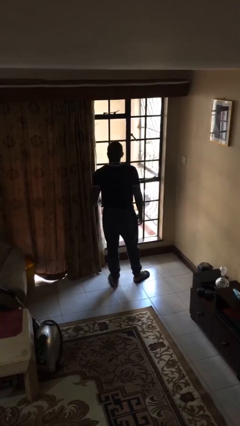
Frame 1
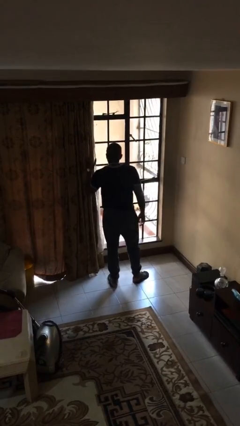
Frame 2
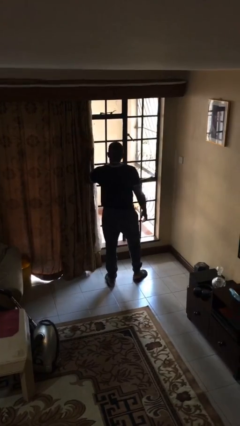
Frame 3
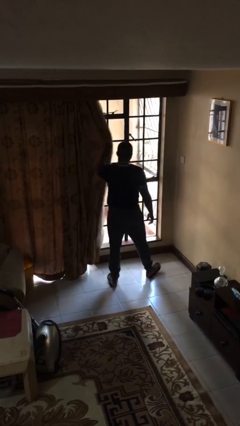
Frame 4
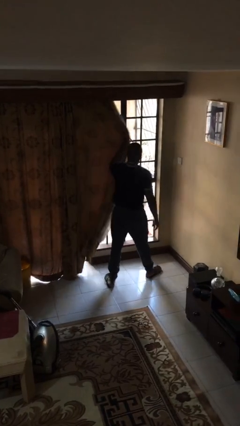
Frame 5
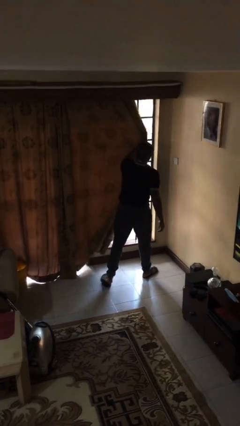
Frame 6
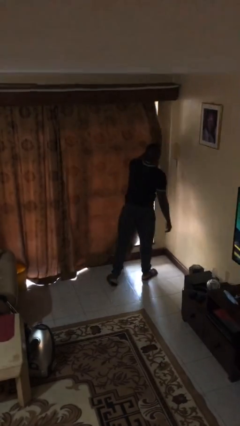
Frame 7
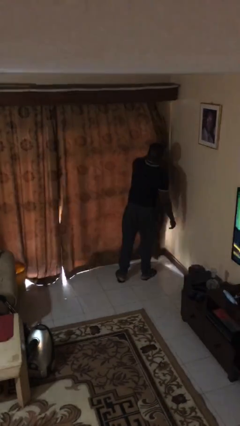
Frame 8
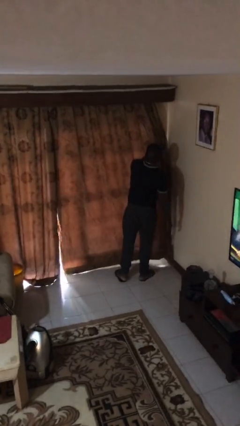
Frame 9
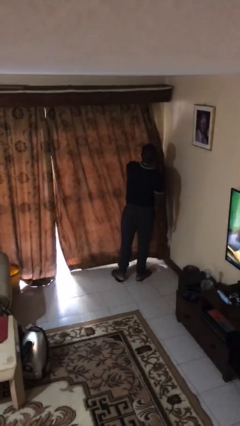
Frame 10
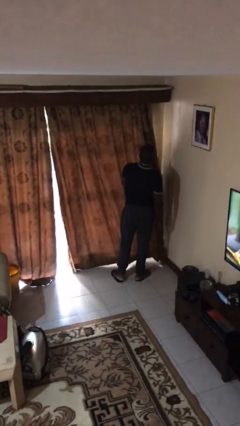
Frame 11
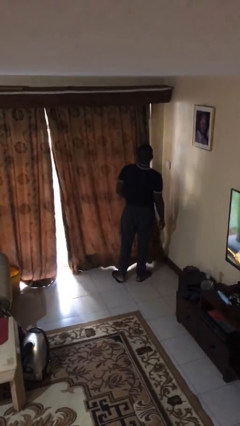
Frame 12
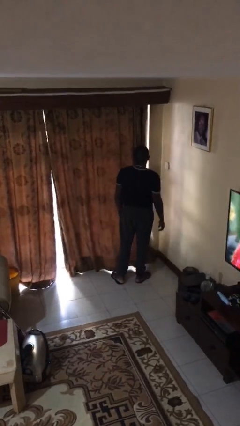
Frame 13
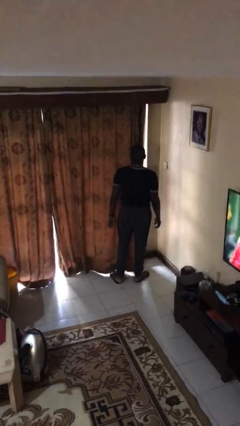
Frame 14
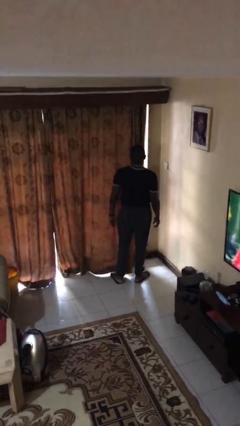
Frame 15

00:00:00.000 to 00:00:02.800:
person closes curtains

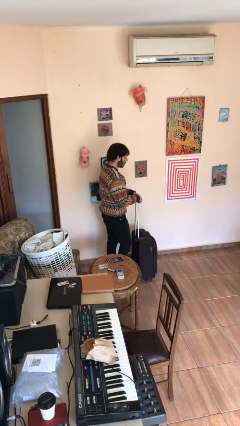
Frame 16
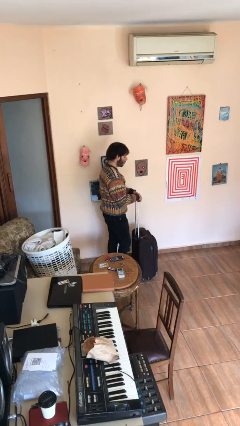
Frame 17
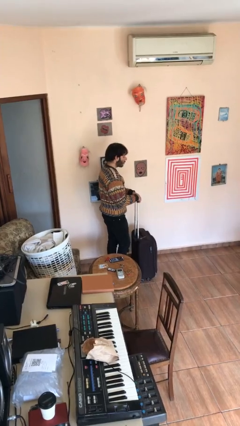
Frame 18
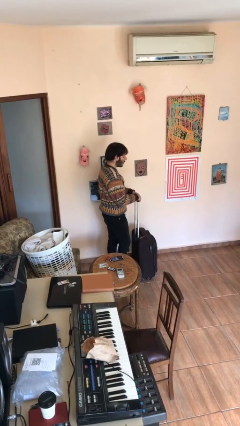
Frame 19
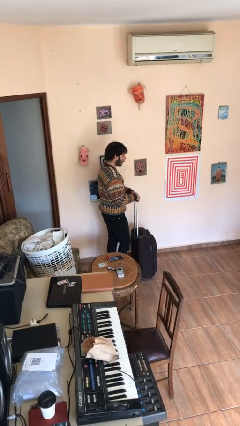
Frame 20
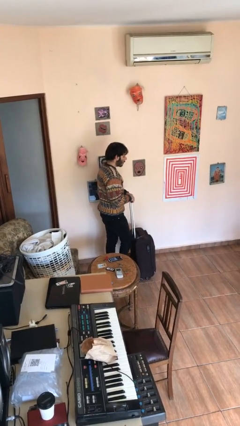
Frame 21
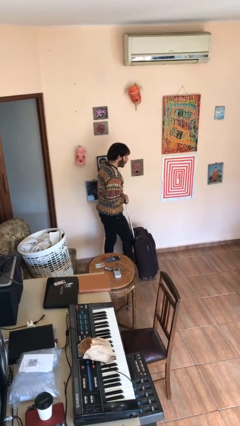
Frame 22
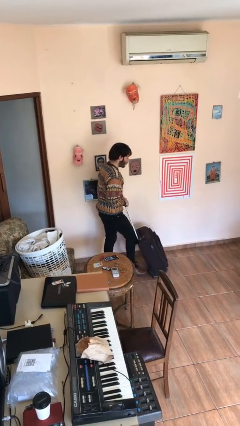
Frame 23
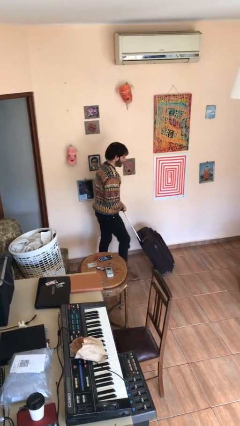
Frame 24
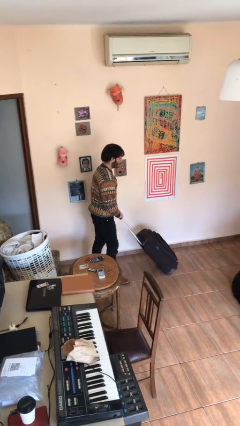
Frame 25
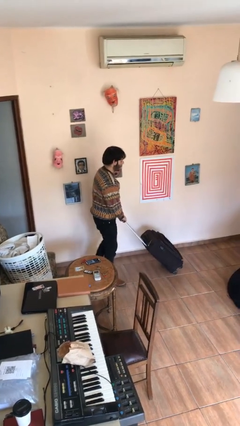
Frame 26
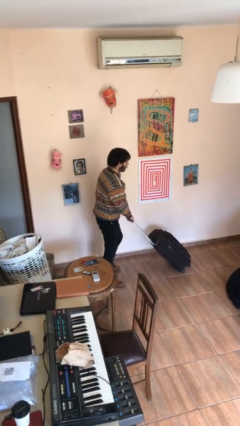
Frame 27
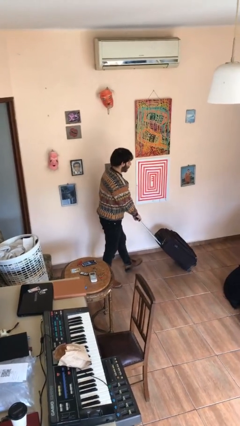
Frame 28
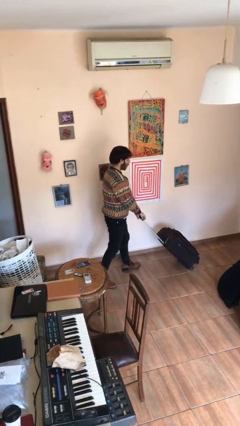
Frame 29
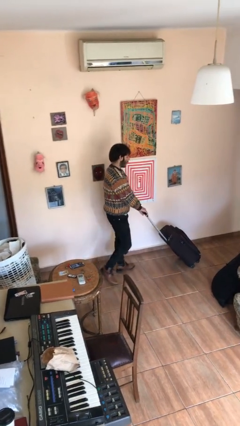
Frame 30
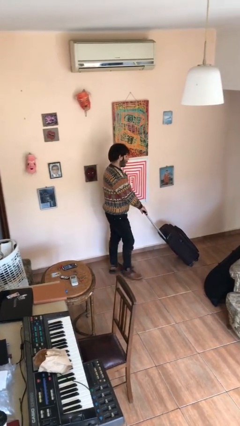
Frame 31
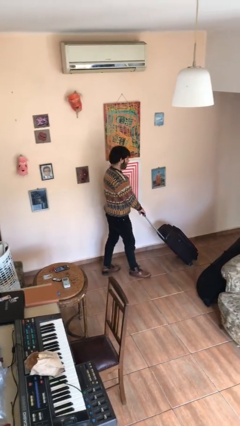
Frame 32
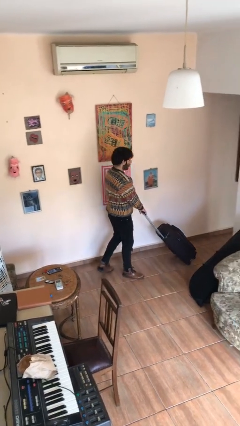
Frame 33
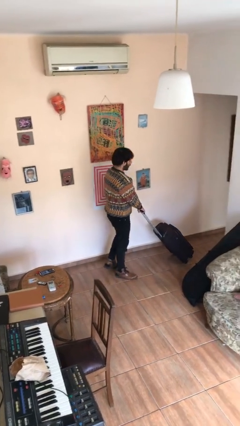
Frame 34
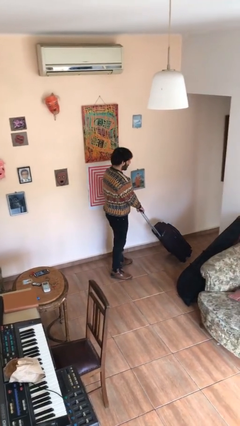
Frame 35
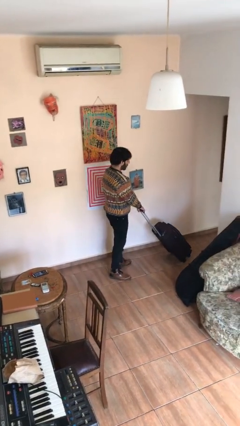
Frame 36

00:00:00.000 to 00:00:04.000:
person pushes wheeled cart

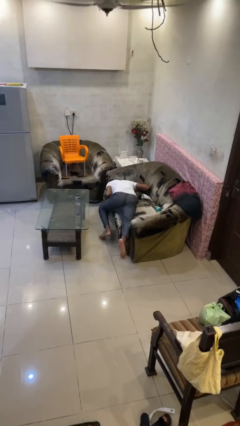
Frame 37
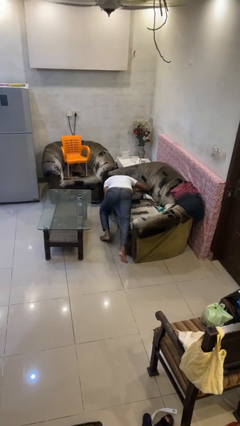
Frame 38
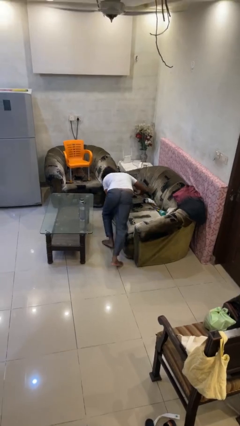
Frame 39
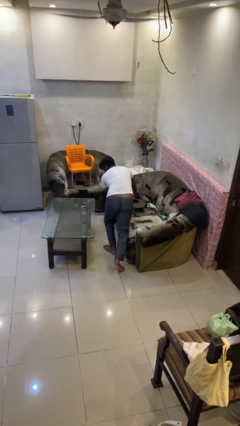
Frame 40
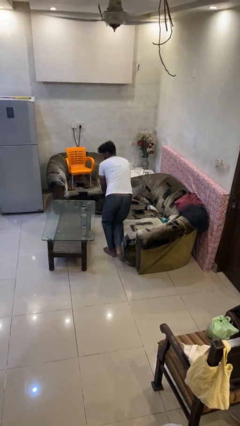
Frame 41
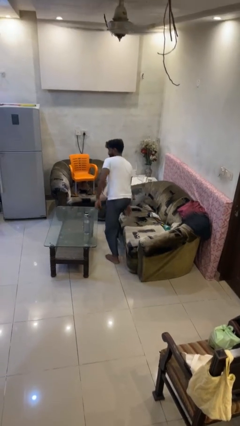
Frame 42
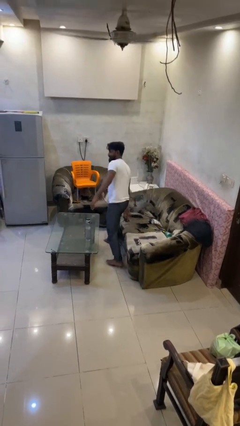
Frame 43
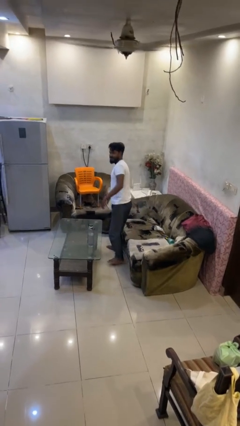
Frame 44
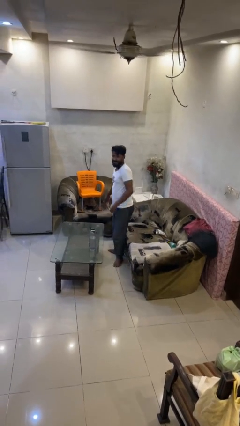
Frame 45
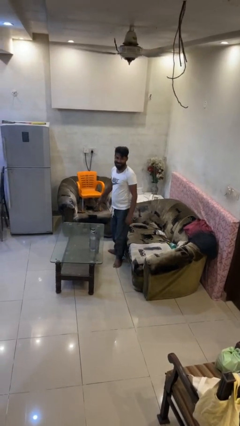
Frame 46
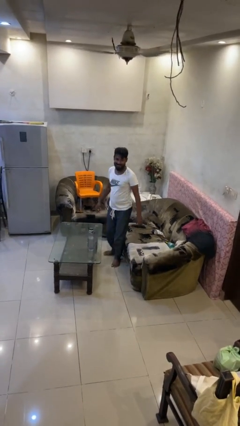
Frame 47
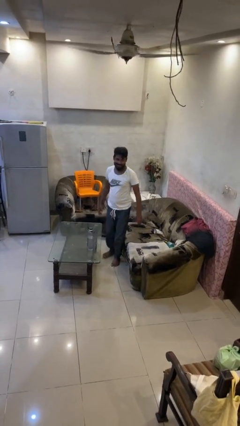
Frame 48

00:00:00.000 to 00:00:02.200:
person stands up

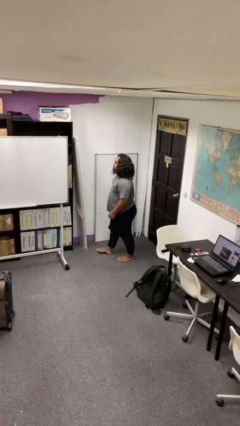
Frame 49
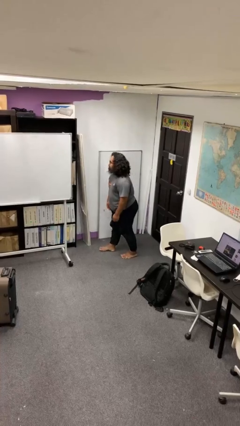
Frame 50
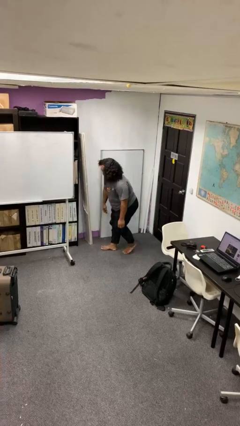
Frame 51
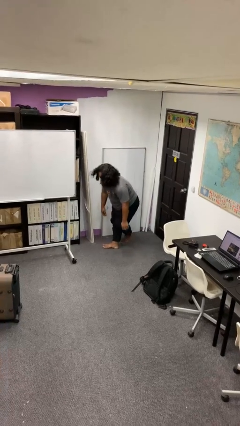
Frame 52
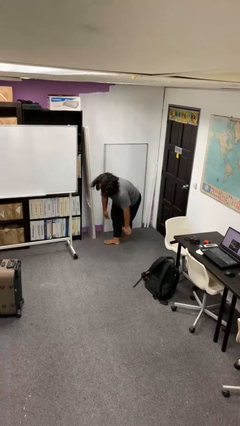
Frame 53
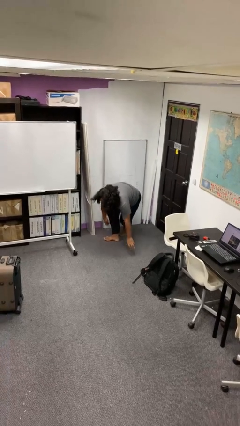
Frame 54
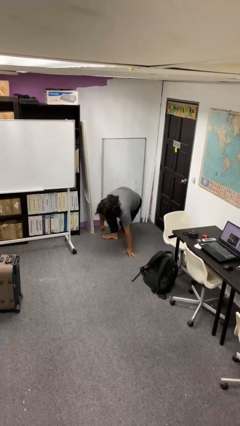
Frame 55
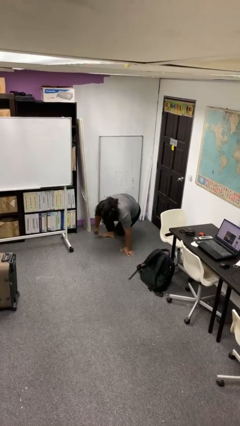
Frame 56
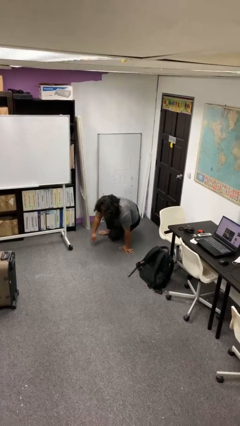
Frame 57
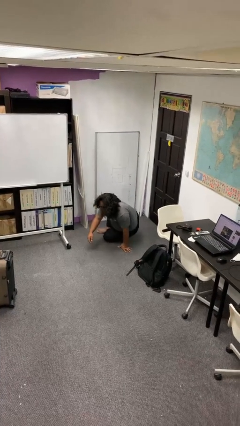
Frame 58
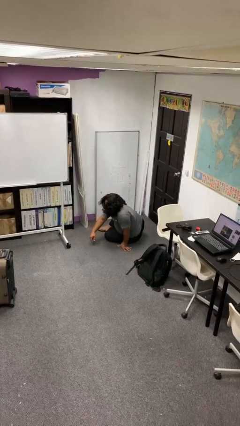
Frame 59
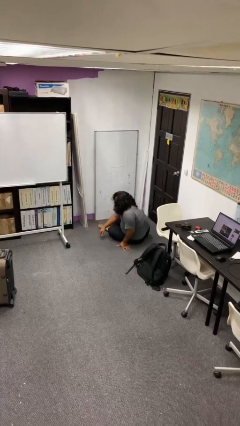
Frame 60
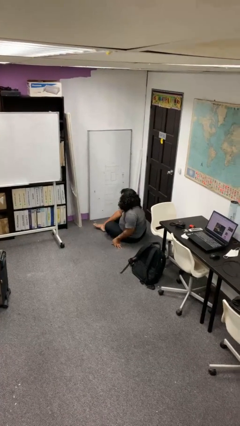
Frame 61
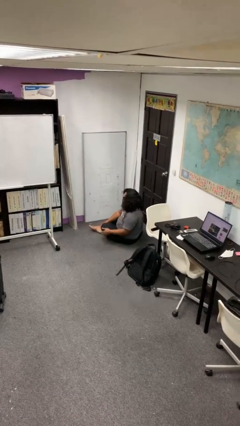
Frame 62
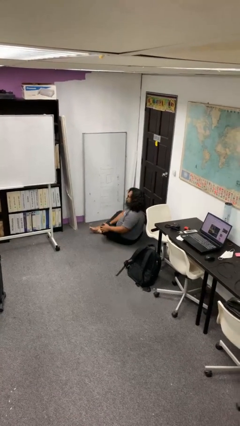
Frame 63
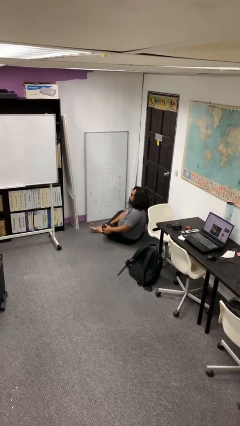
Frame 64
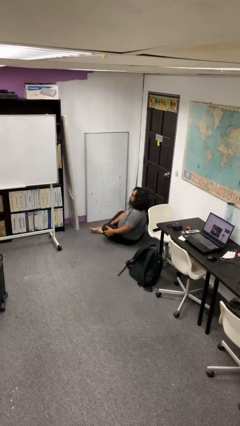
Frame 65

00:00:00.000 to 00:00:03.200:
person sits crisscross

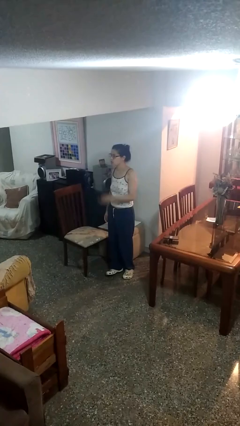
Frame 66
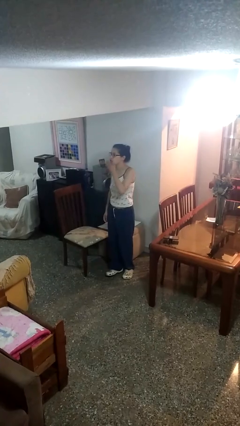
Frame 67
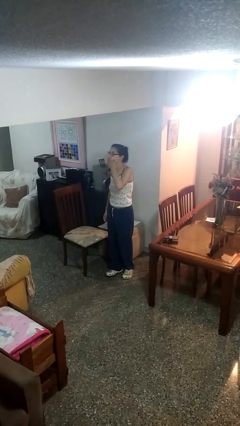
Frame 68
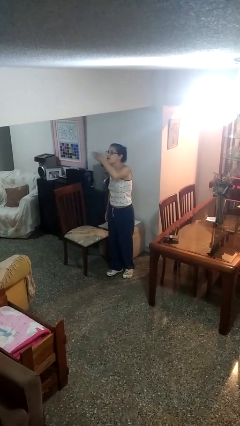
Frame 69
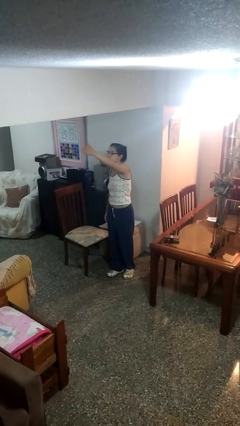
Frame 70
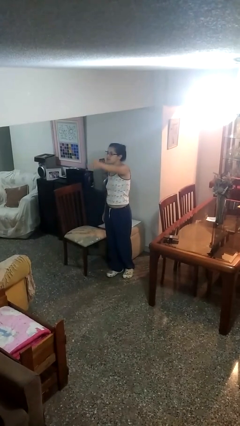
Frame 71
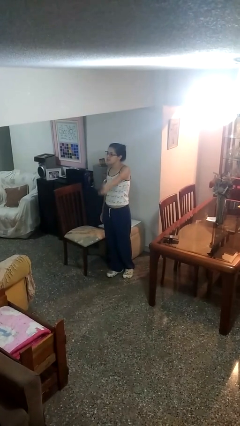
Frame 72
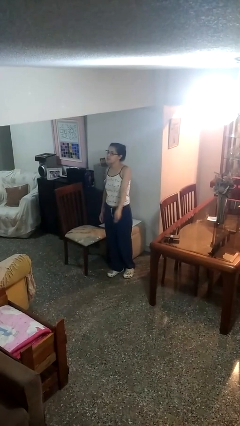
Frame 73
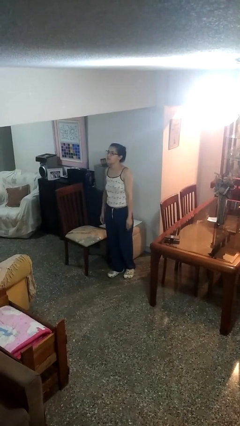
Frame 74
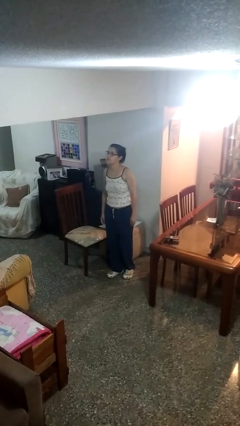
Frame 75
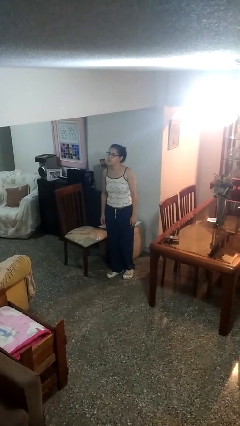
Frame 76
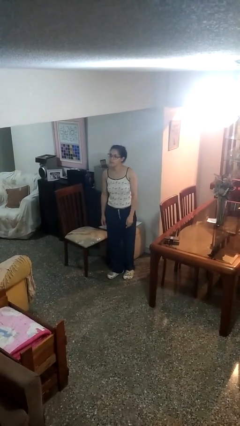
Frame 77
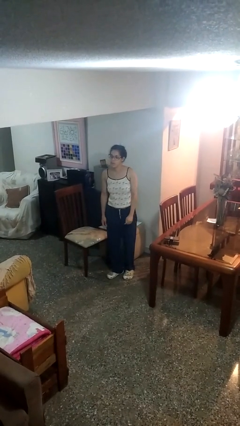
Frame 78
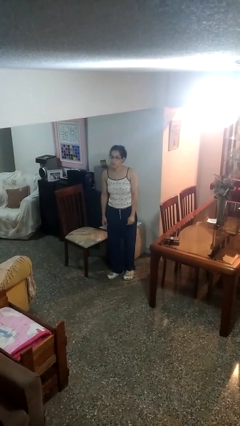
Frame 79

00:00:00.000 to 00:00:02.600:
person gestures blow kiss

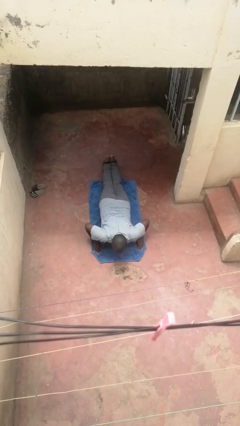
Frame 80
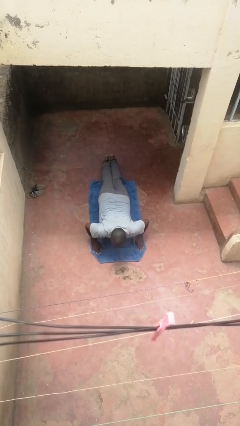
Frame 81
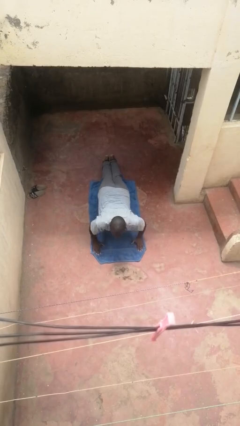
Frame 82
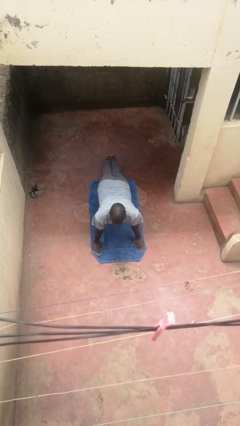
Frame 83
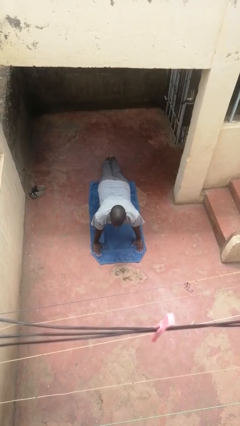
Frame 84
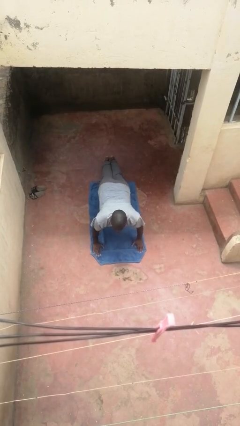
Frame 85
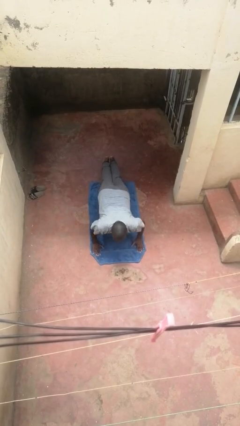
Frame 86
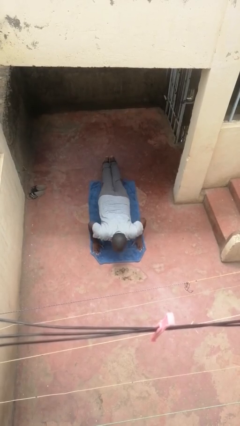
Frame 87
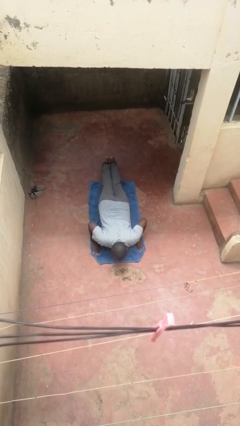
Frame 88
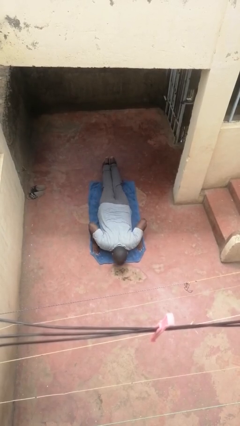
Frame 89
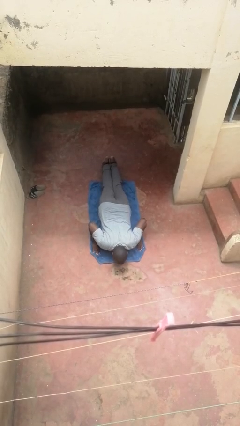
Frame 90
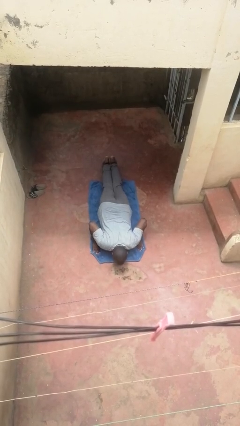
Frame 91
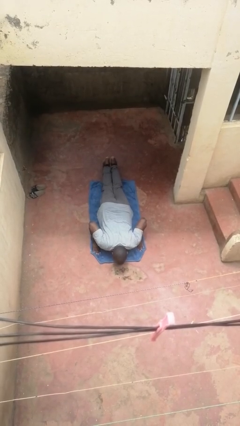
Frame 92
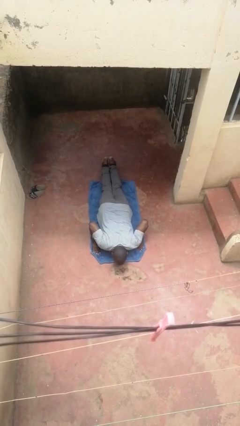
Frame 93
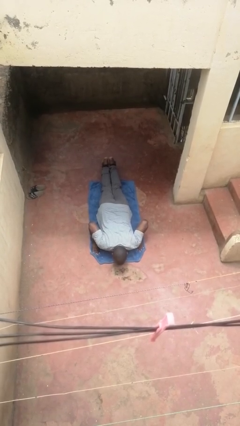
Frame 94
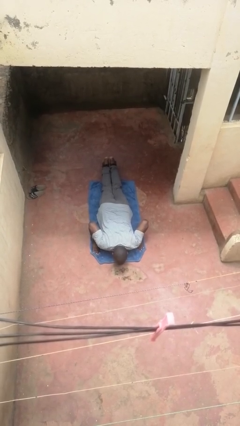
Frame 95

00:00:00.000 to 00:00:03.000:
person exercises with pushup
